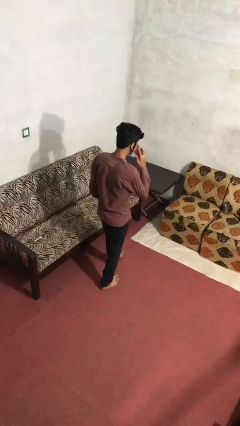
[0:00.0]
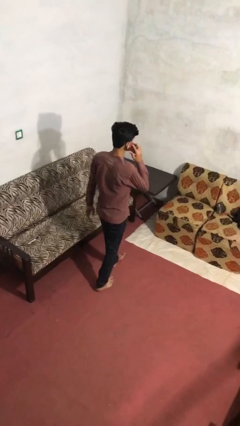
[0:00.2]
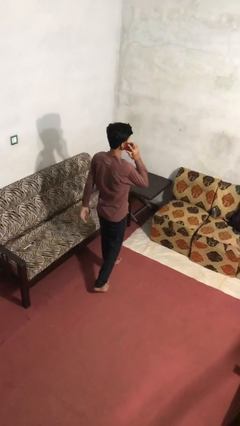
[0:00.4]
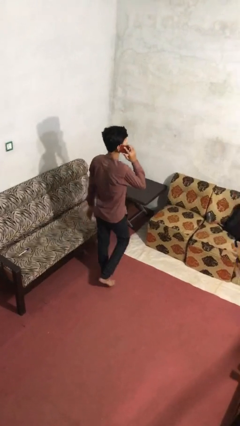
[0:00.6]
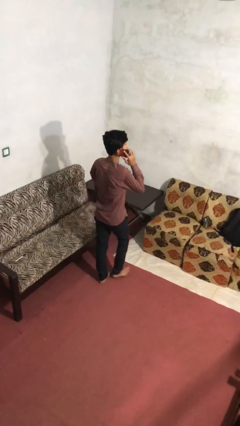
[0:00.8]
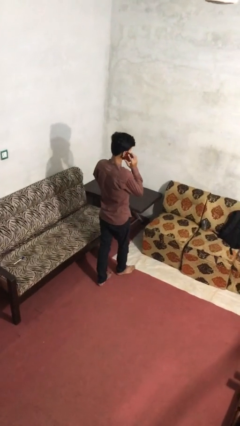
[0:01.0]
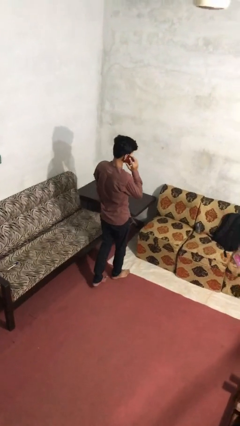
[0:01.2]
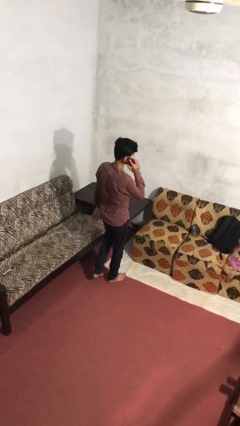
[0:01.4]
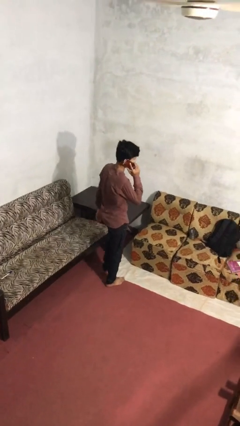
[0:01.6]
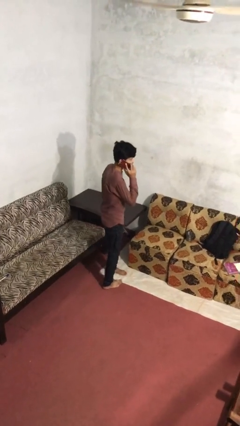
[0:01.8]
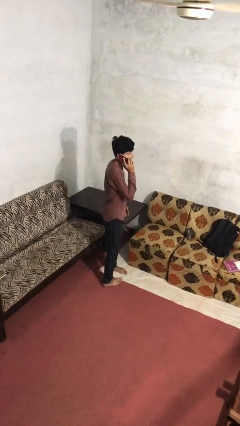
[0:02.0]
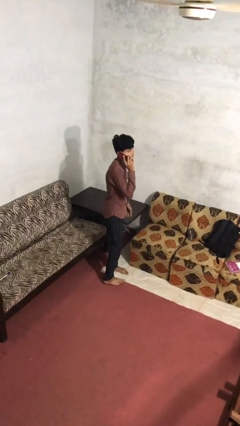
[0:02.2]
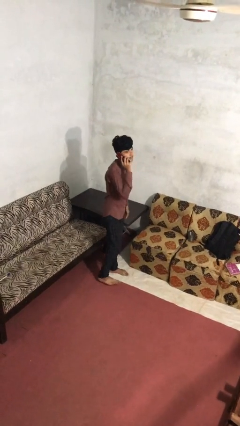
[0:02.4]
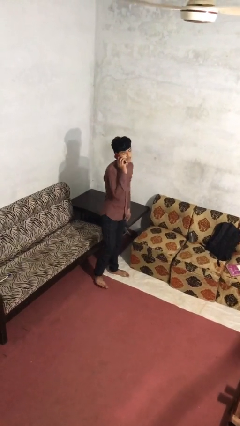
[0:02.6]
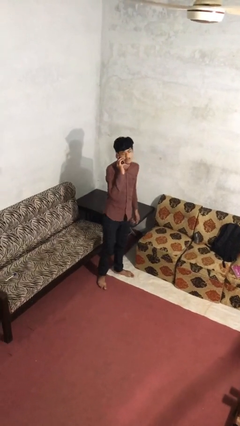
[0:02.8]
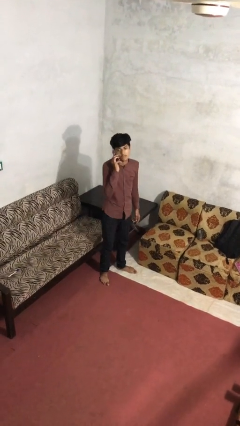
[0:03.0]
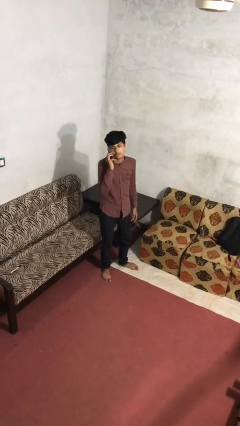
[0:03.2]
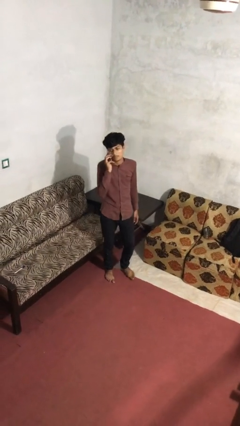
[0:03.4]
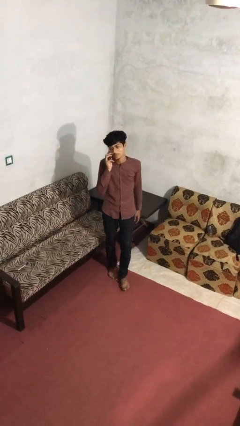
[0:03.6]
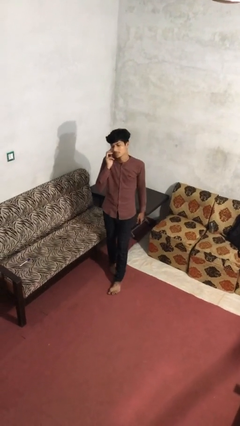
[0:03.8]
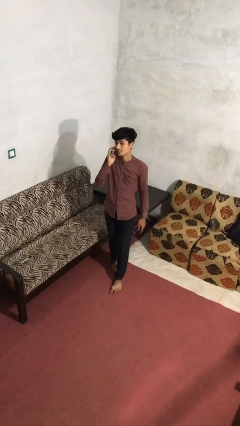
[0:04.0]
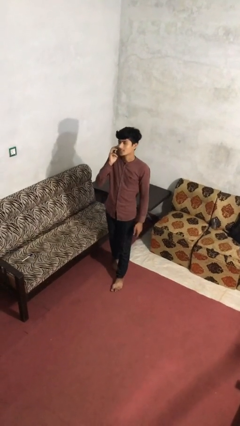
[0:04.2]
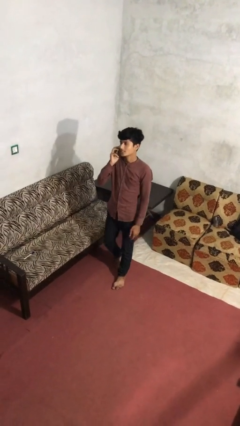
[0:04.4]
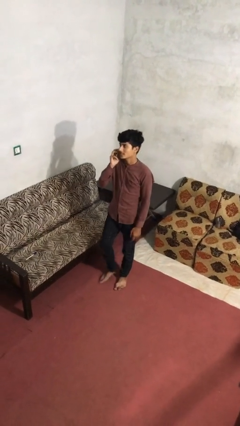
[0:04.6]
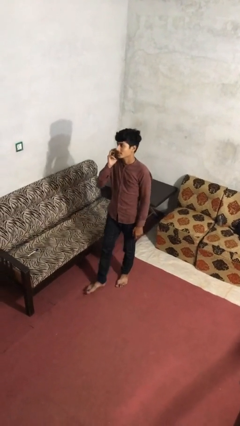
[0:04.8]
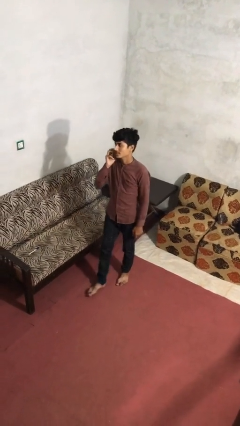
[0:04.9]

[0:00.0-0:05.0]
person talks on phone

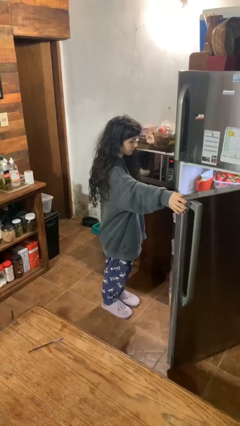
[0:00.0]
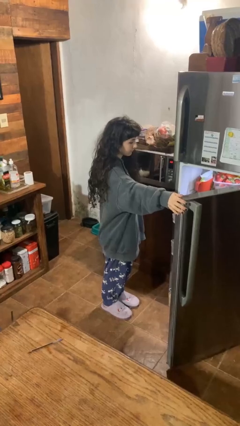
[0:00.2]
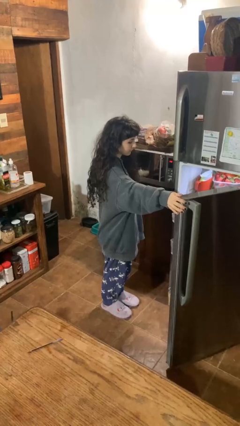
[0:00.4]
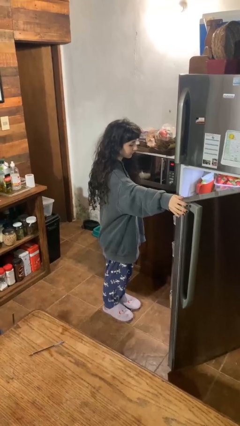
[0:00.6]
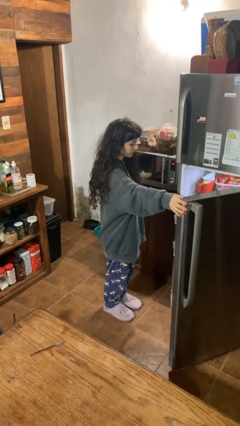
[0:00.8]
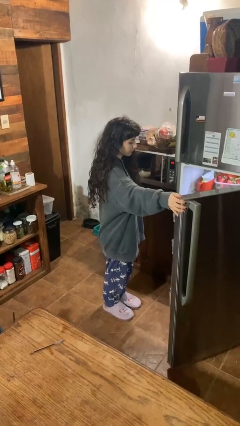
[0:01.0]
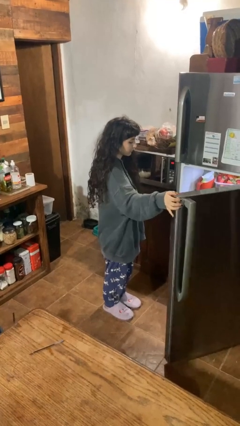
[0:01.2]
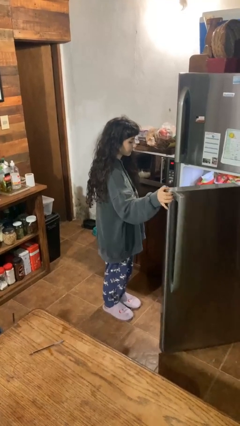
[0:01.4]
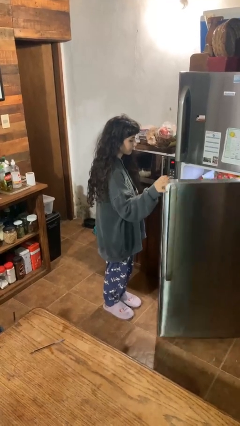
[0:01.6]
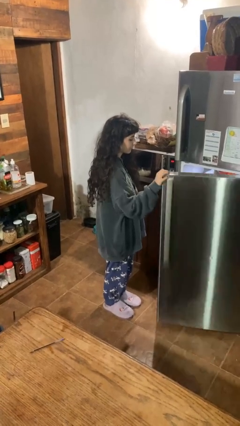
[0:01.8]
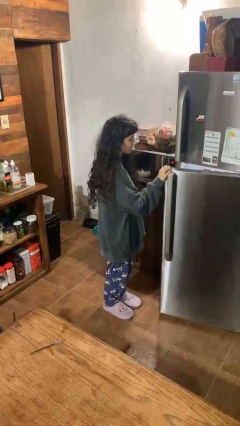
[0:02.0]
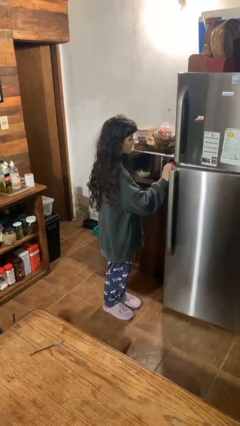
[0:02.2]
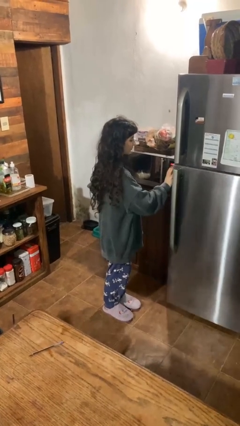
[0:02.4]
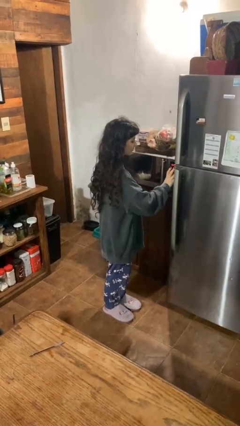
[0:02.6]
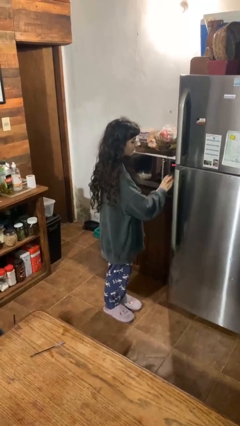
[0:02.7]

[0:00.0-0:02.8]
person closes refrigerator

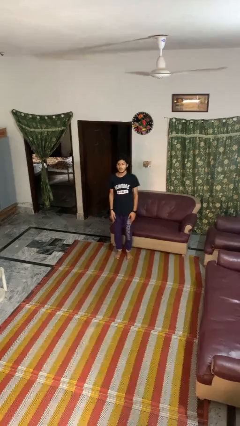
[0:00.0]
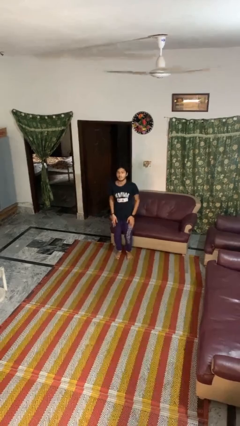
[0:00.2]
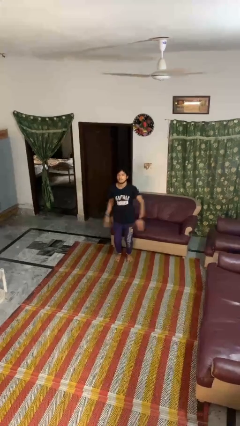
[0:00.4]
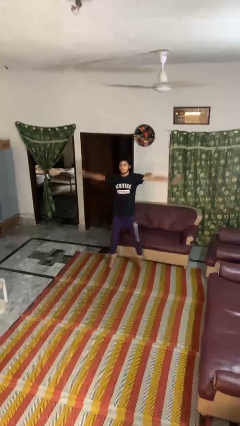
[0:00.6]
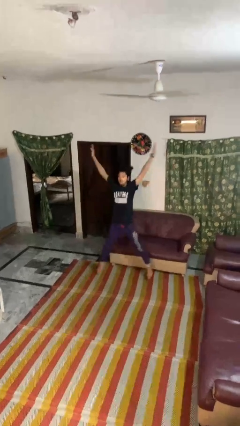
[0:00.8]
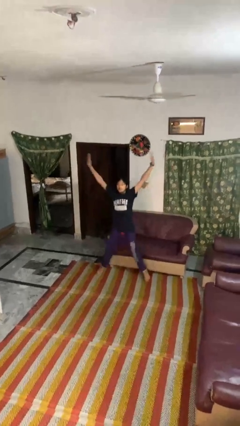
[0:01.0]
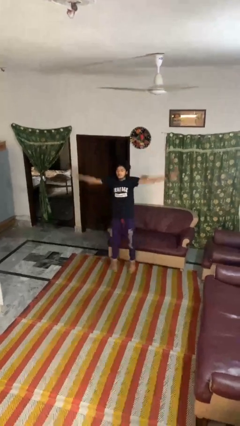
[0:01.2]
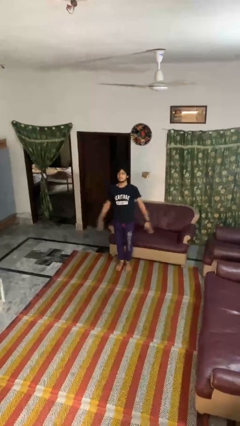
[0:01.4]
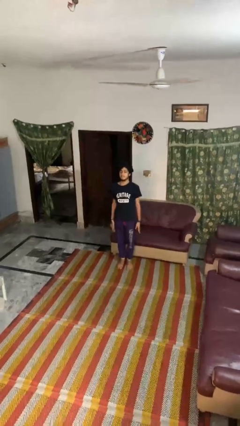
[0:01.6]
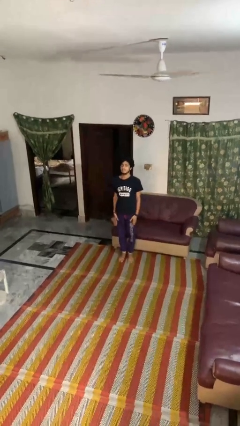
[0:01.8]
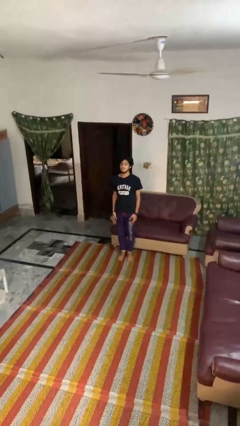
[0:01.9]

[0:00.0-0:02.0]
person exercises with jumping jacks

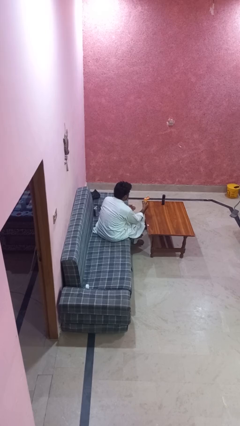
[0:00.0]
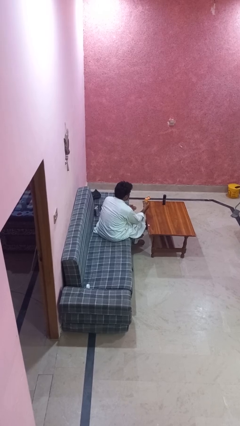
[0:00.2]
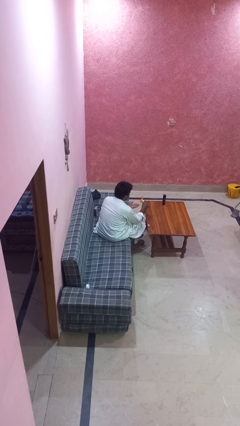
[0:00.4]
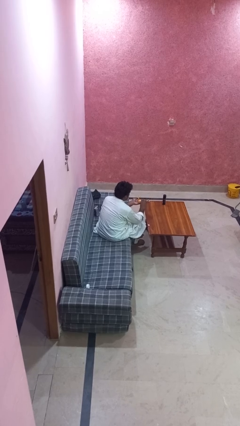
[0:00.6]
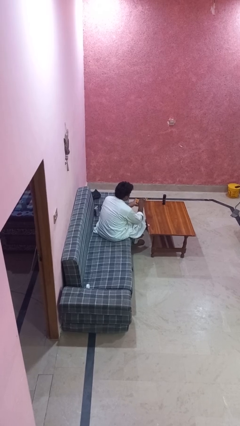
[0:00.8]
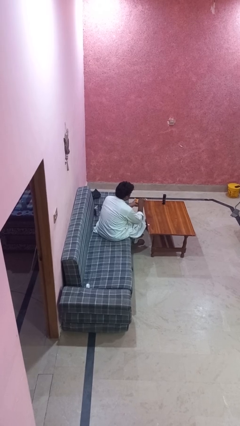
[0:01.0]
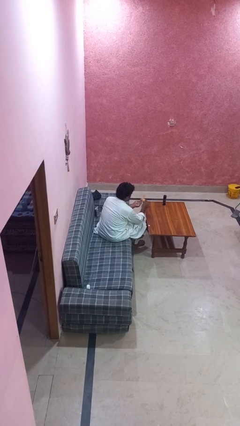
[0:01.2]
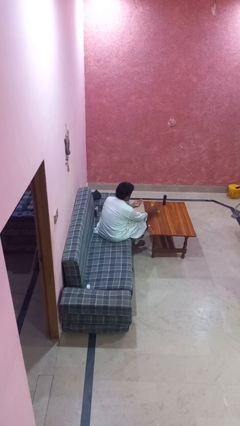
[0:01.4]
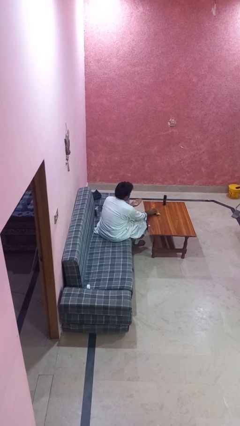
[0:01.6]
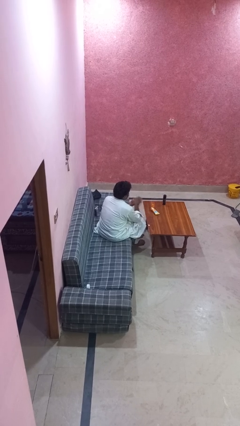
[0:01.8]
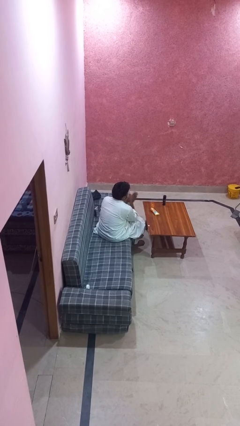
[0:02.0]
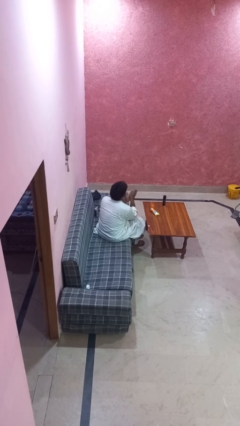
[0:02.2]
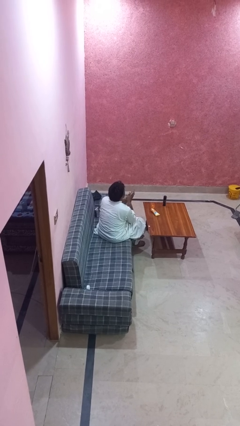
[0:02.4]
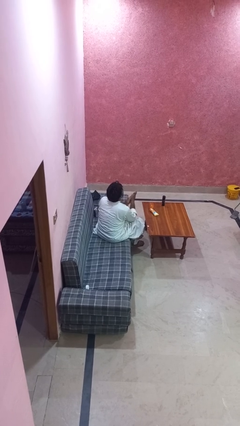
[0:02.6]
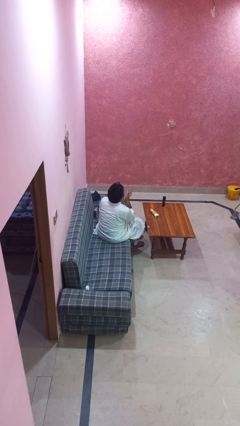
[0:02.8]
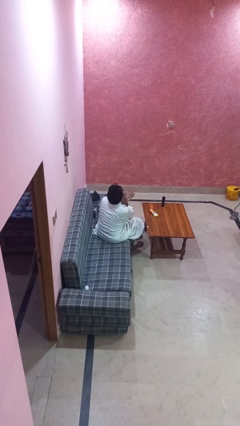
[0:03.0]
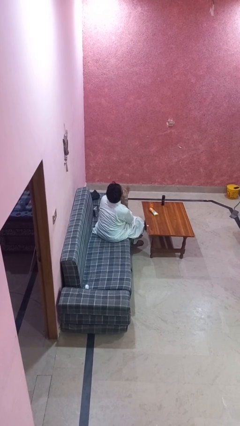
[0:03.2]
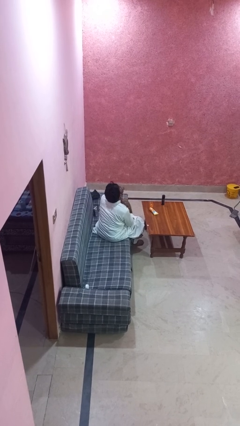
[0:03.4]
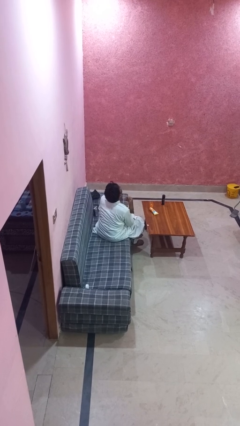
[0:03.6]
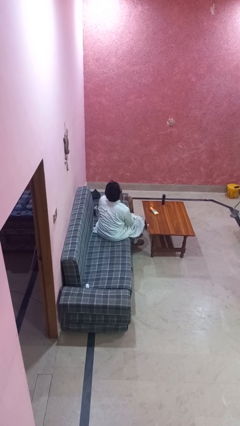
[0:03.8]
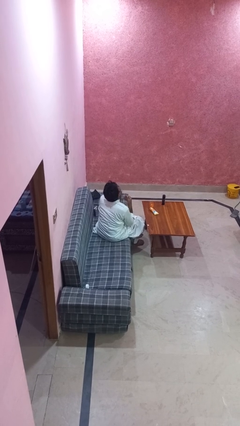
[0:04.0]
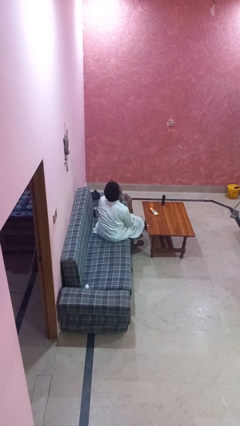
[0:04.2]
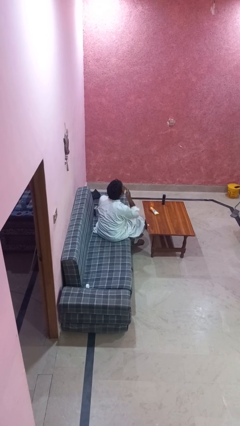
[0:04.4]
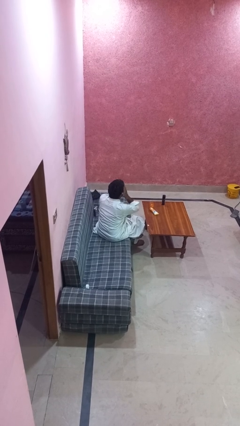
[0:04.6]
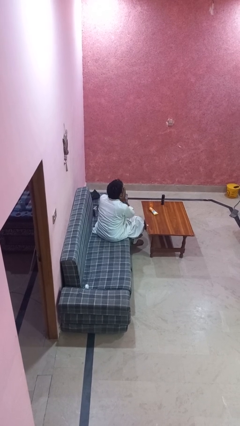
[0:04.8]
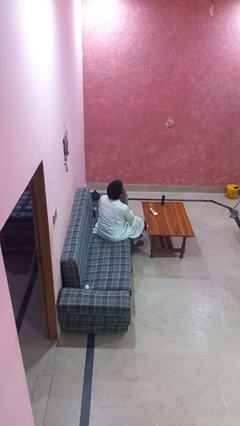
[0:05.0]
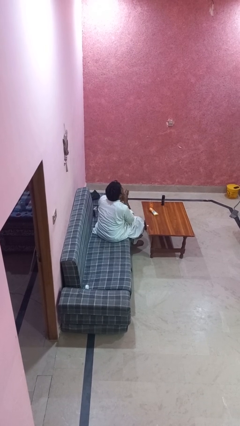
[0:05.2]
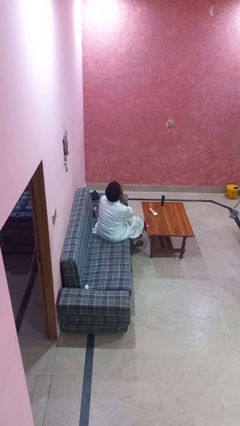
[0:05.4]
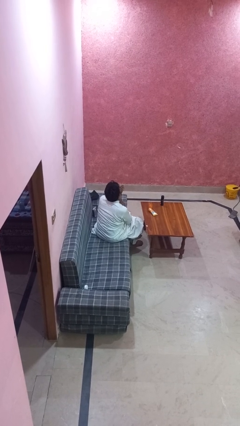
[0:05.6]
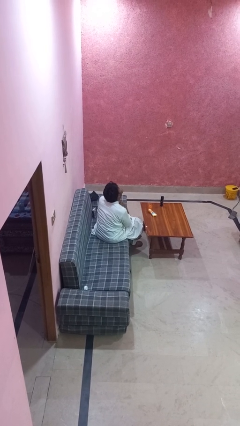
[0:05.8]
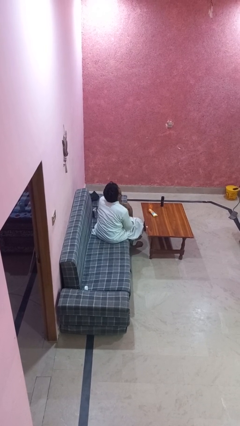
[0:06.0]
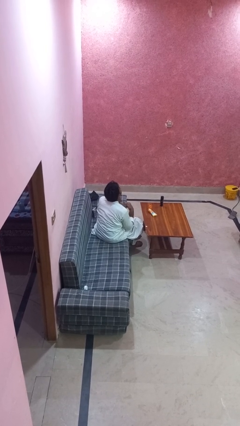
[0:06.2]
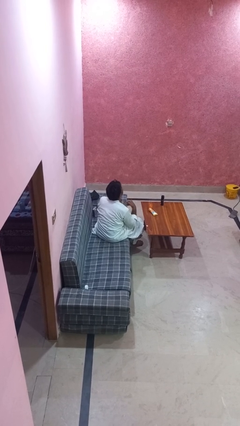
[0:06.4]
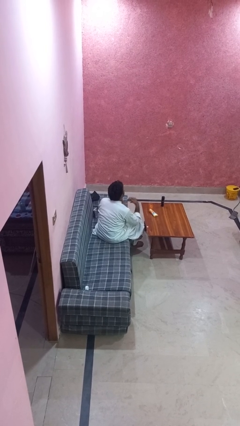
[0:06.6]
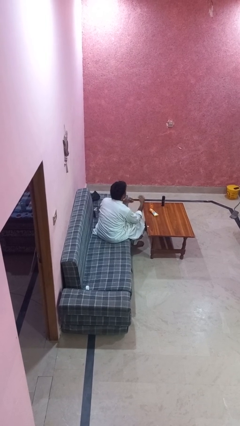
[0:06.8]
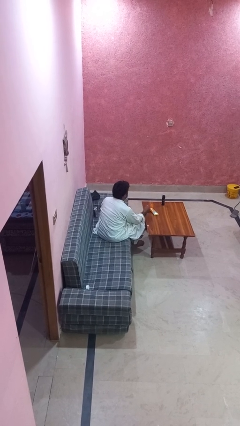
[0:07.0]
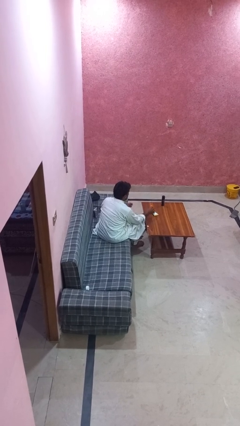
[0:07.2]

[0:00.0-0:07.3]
person applies sunscreen

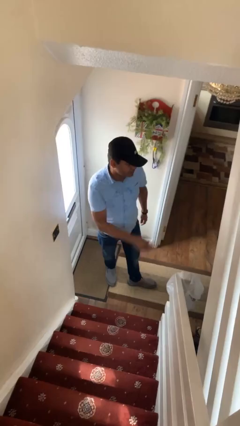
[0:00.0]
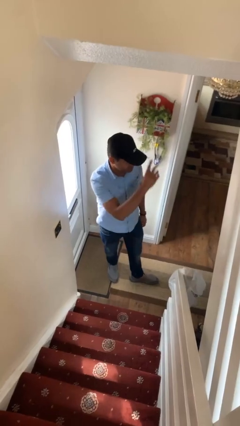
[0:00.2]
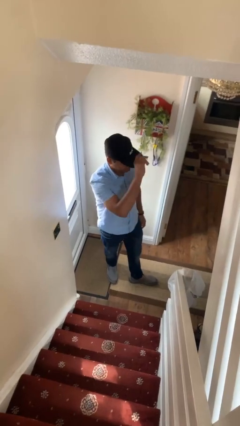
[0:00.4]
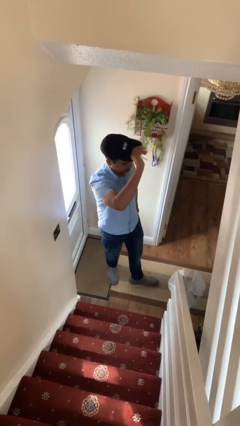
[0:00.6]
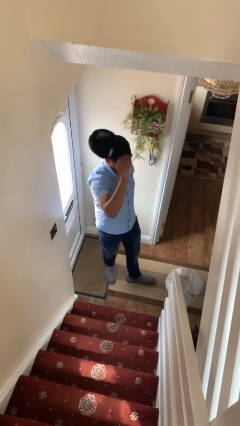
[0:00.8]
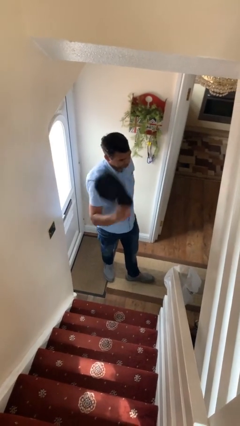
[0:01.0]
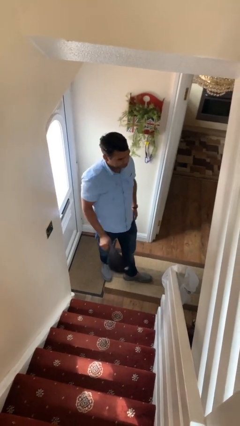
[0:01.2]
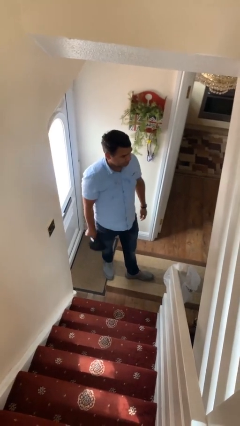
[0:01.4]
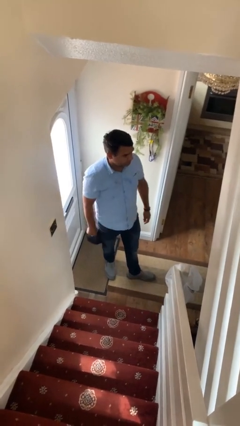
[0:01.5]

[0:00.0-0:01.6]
person takes off hat
